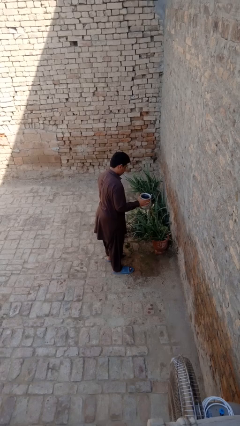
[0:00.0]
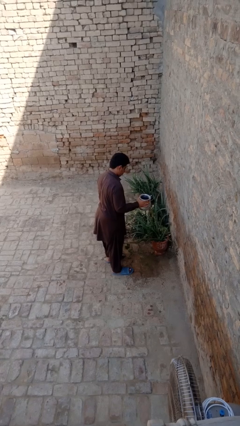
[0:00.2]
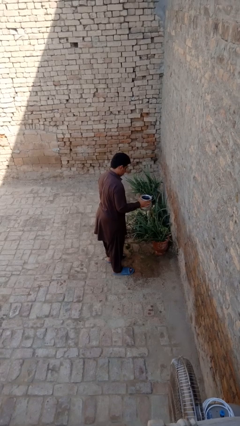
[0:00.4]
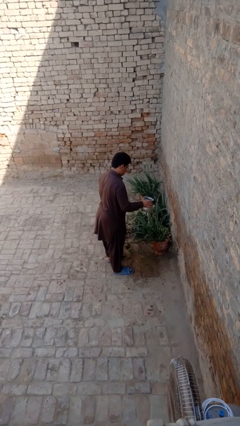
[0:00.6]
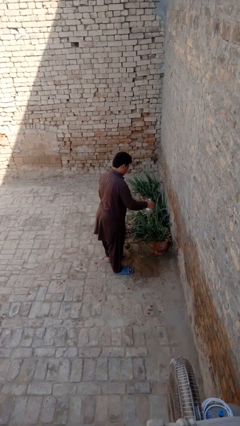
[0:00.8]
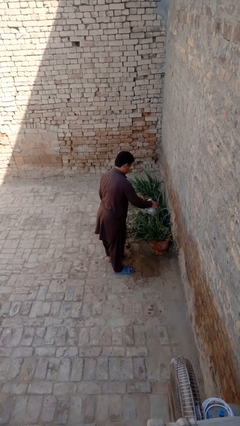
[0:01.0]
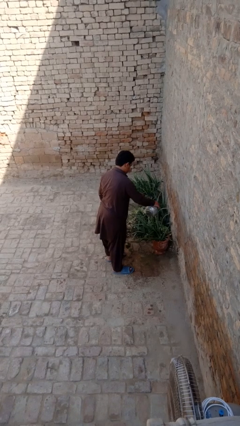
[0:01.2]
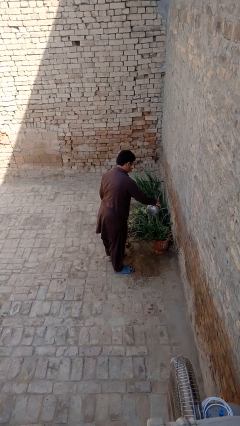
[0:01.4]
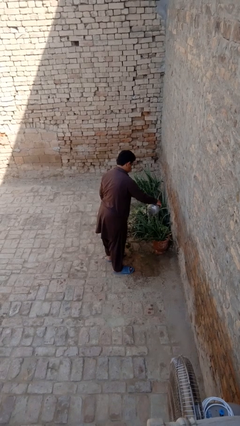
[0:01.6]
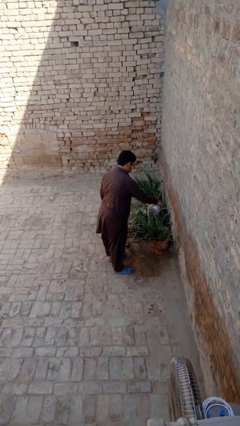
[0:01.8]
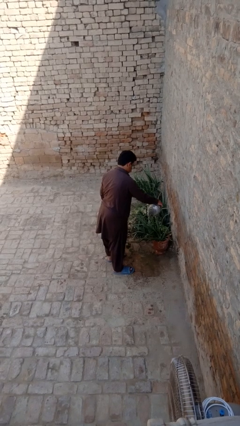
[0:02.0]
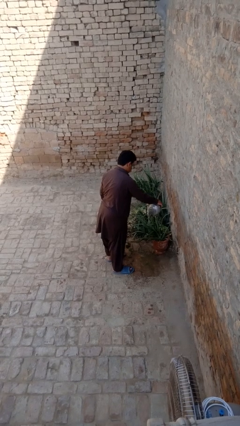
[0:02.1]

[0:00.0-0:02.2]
person waters houseplant

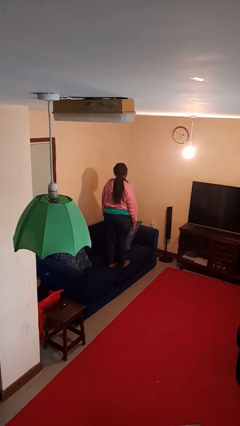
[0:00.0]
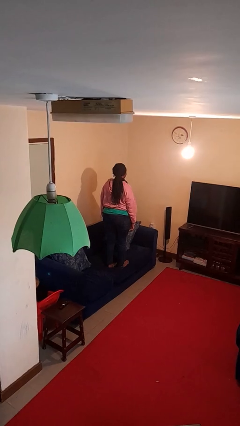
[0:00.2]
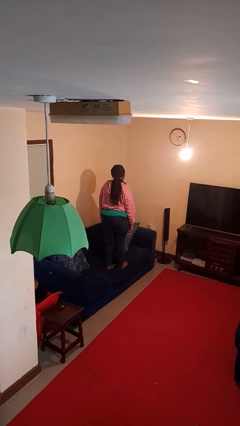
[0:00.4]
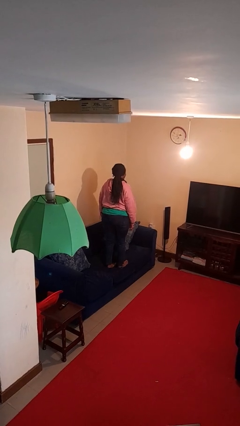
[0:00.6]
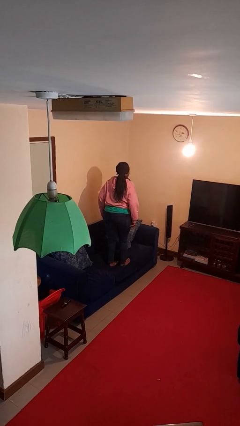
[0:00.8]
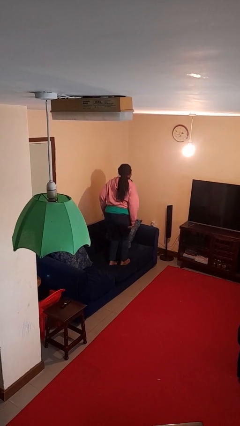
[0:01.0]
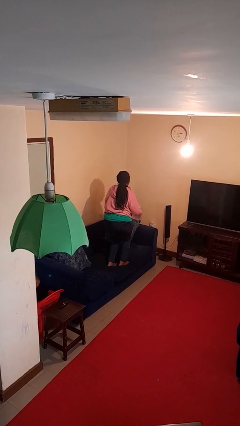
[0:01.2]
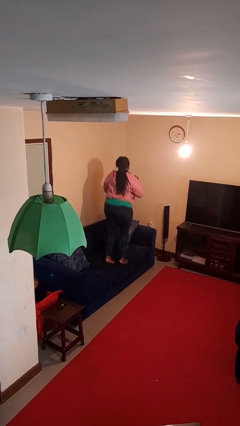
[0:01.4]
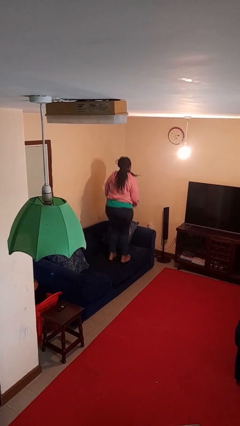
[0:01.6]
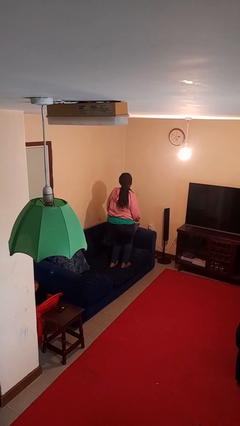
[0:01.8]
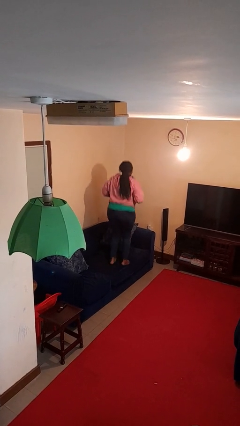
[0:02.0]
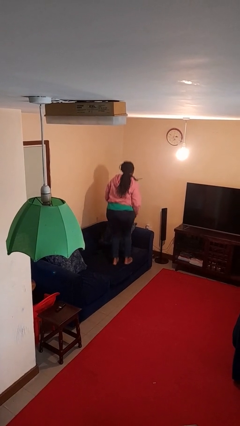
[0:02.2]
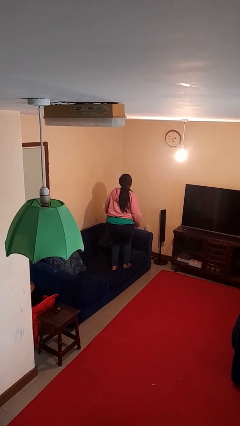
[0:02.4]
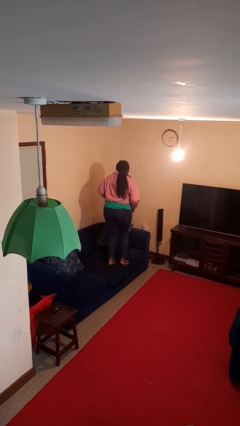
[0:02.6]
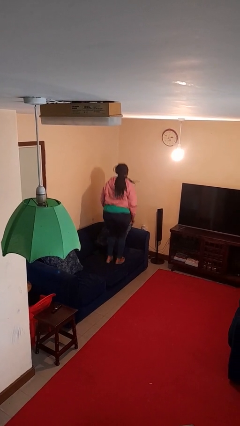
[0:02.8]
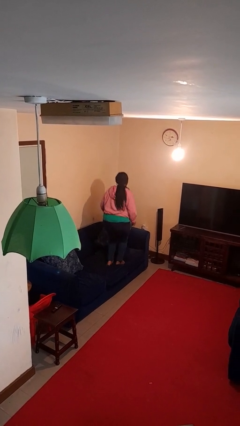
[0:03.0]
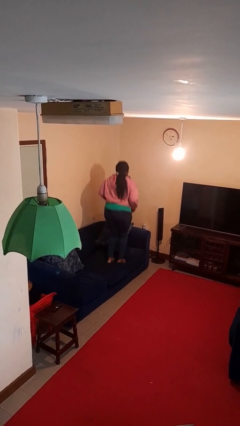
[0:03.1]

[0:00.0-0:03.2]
person jumps on couch

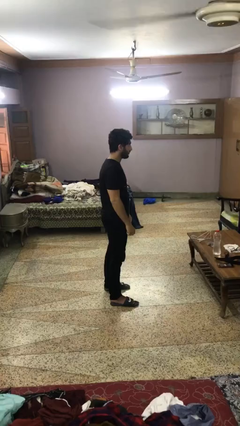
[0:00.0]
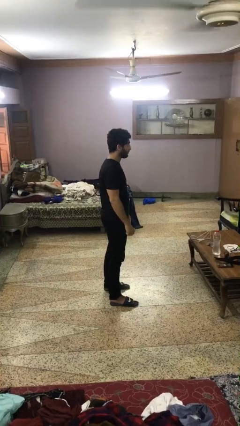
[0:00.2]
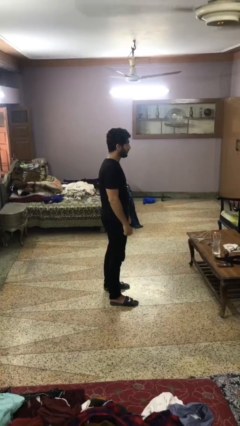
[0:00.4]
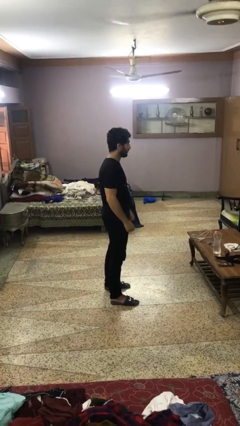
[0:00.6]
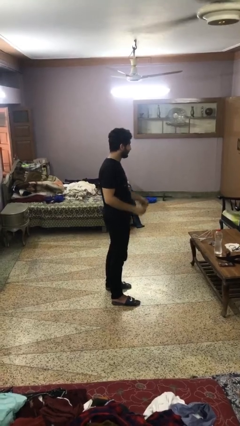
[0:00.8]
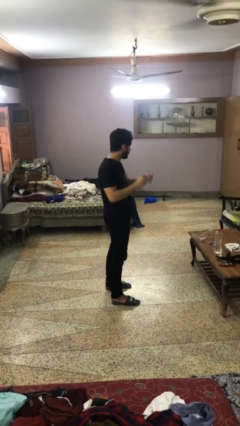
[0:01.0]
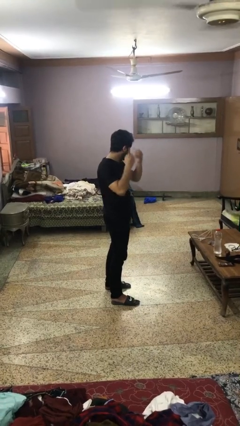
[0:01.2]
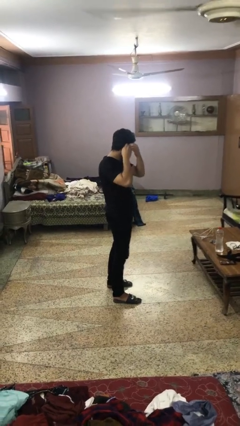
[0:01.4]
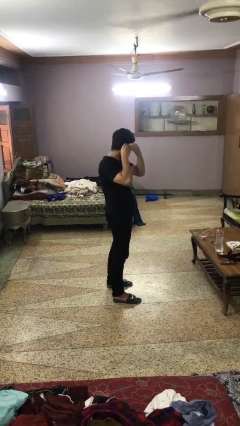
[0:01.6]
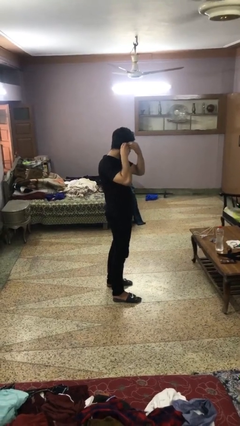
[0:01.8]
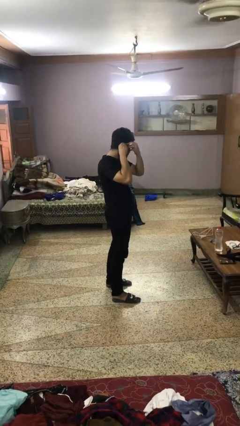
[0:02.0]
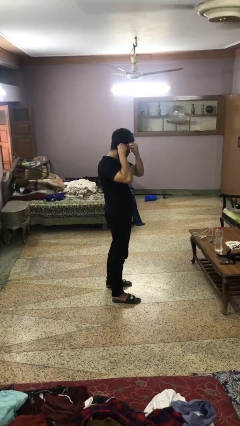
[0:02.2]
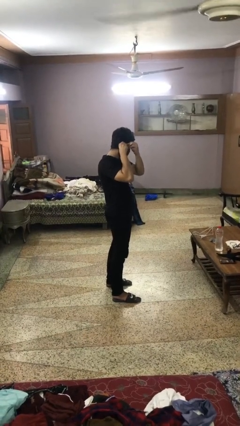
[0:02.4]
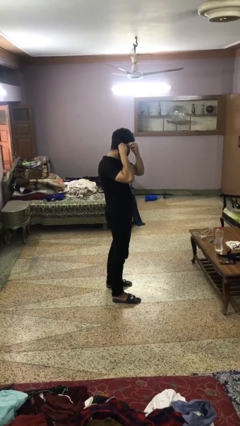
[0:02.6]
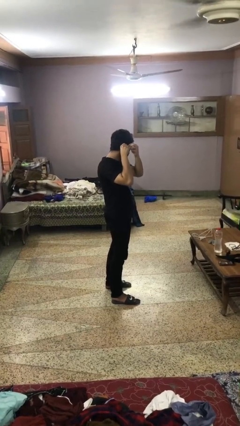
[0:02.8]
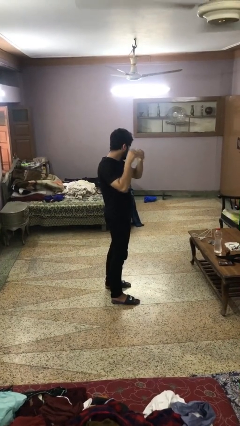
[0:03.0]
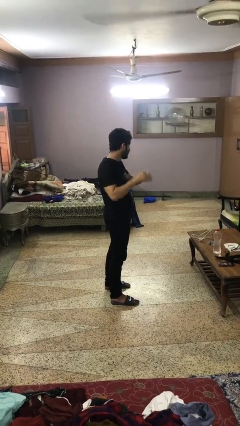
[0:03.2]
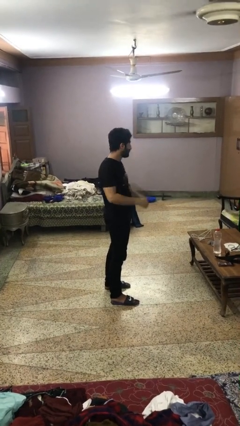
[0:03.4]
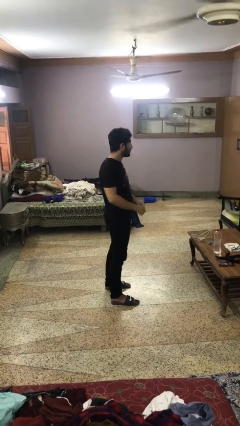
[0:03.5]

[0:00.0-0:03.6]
person takes off earrings

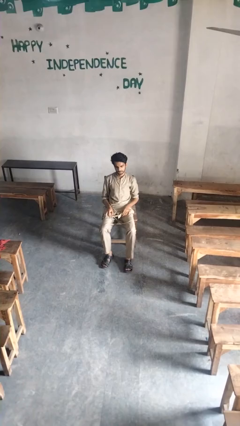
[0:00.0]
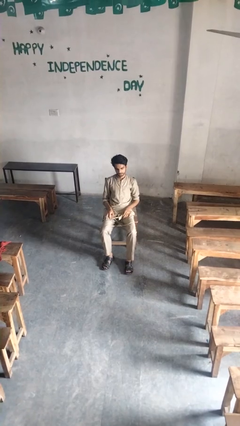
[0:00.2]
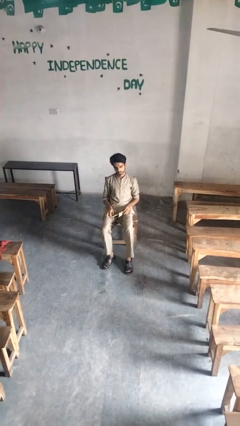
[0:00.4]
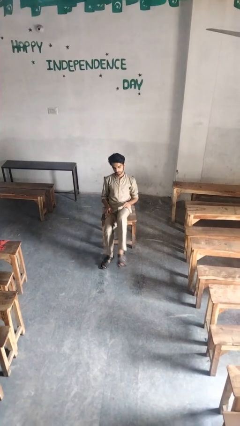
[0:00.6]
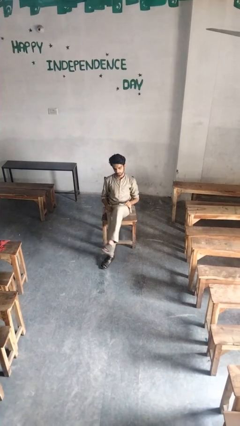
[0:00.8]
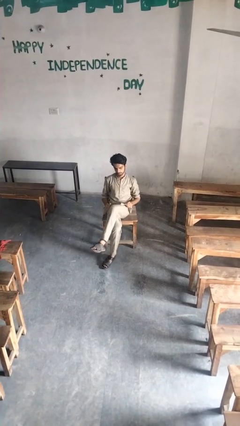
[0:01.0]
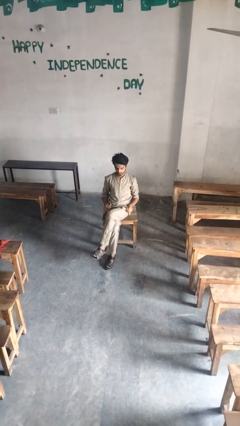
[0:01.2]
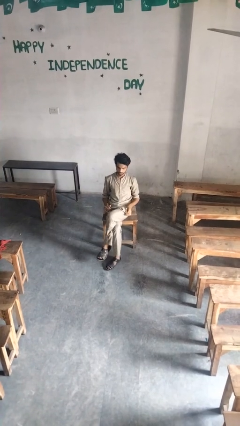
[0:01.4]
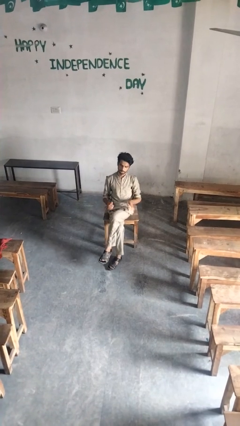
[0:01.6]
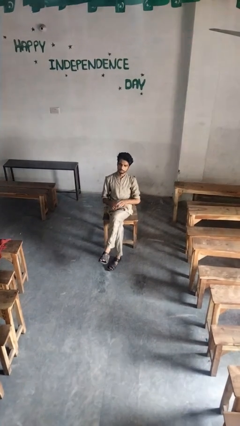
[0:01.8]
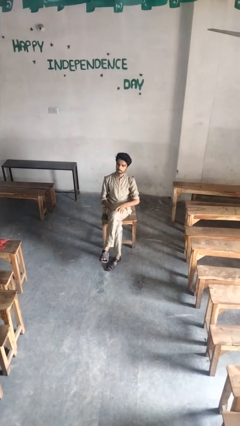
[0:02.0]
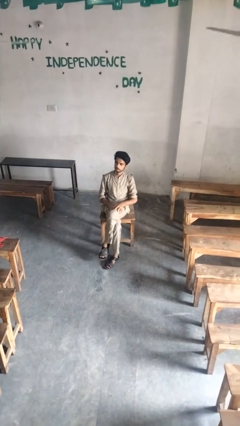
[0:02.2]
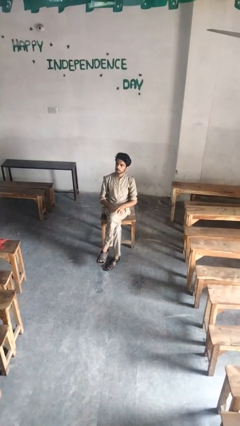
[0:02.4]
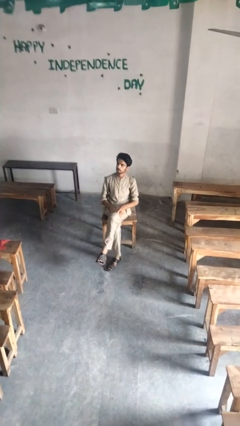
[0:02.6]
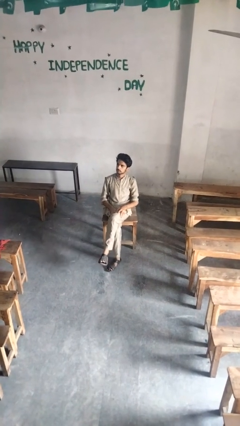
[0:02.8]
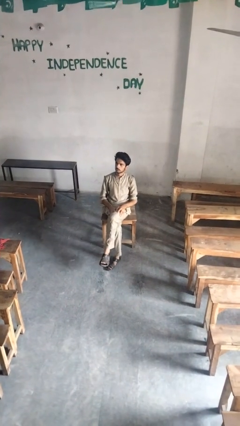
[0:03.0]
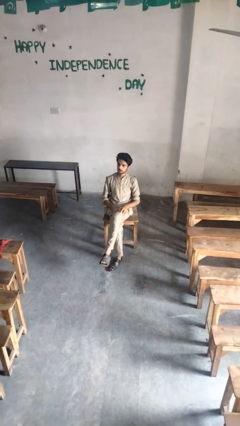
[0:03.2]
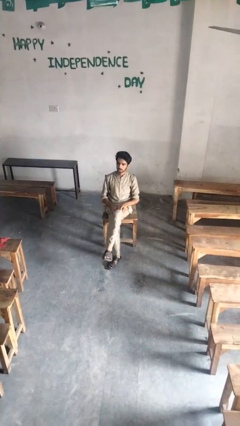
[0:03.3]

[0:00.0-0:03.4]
person crosses legs

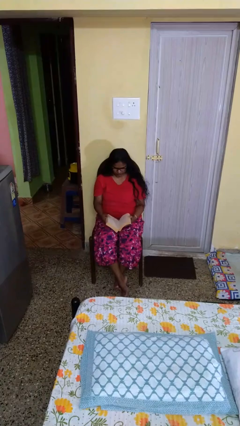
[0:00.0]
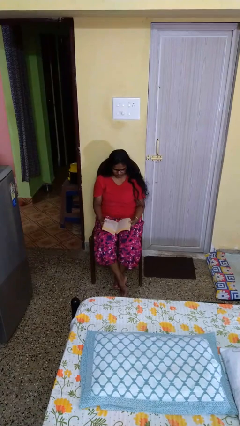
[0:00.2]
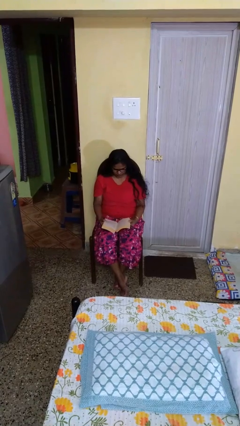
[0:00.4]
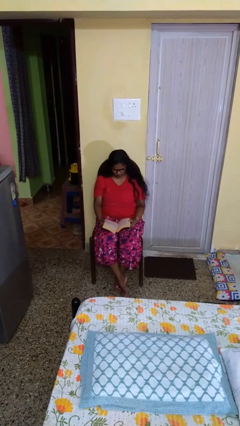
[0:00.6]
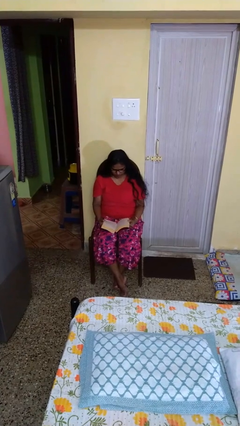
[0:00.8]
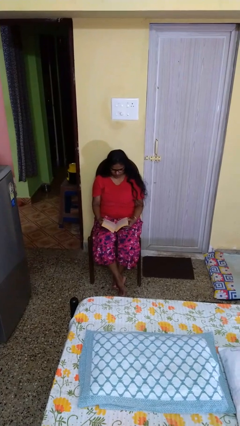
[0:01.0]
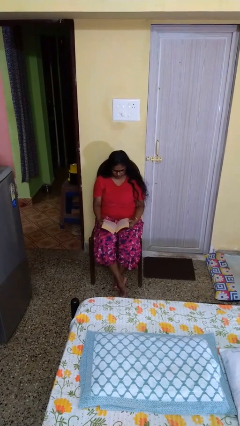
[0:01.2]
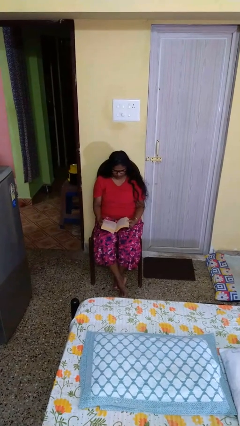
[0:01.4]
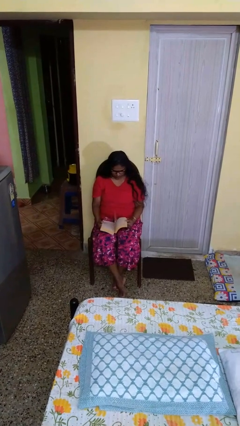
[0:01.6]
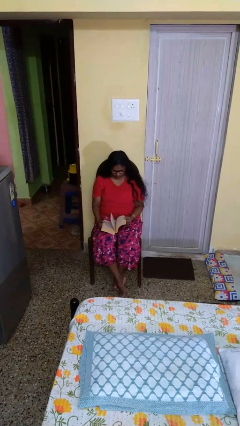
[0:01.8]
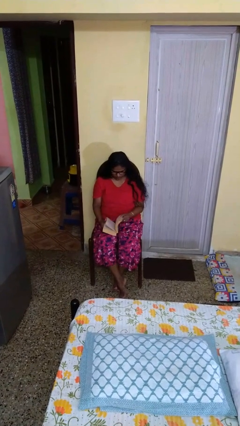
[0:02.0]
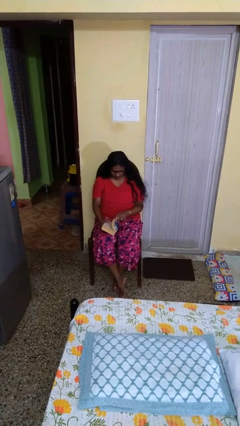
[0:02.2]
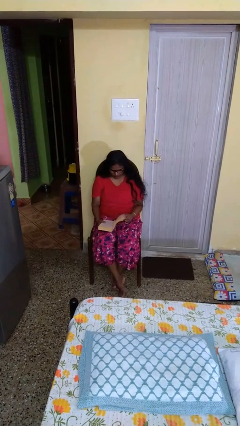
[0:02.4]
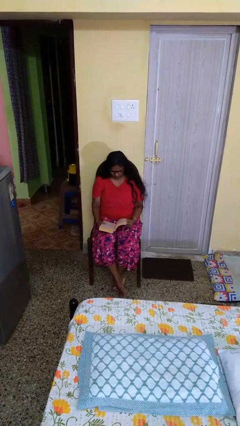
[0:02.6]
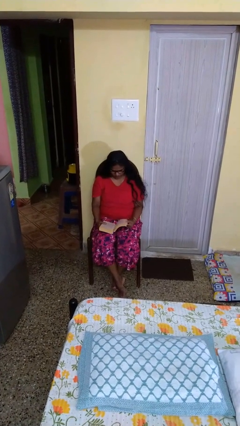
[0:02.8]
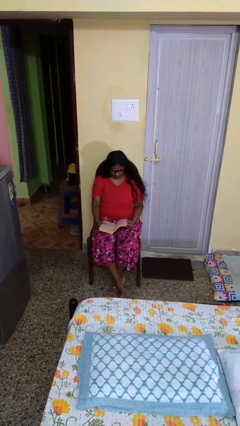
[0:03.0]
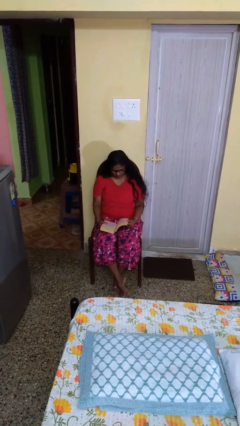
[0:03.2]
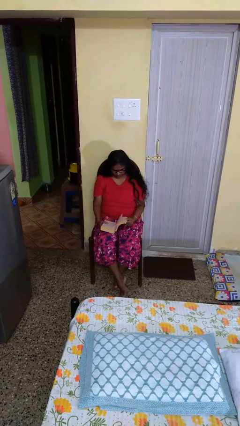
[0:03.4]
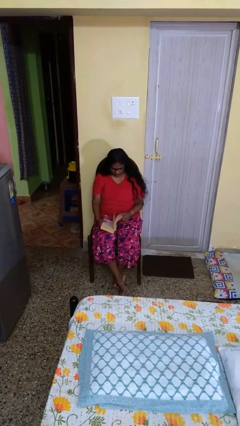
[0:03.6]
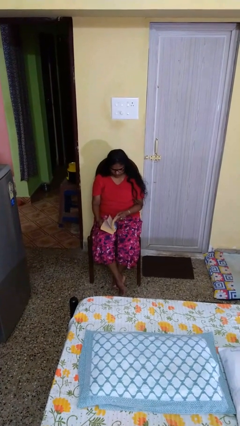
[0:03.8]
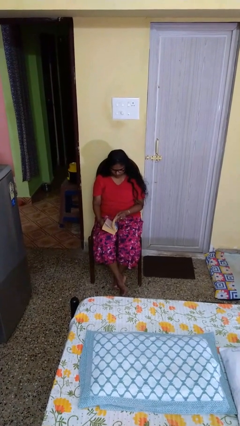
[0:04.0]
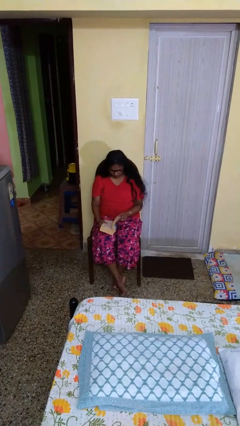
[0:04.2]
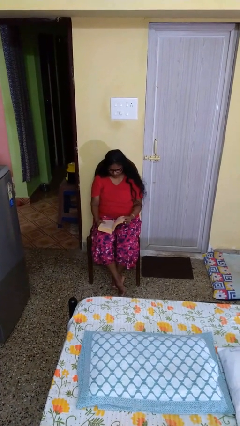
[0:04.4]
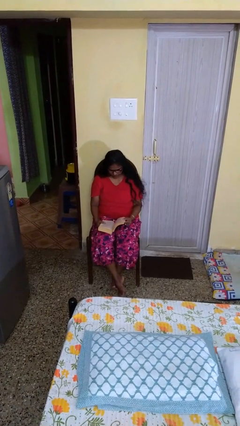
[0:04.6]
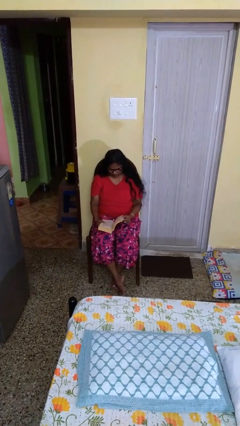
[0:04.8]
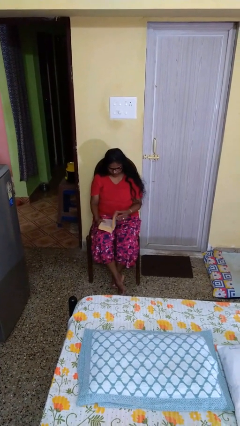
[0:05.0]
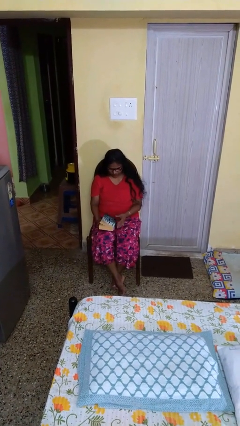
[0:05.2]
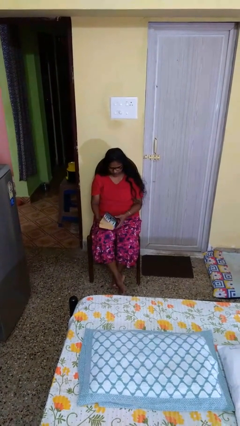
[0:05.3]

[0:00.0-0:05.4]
person reads book
